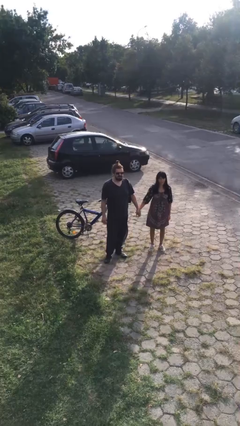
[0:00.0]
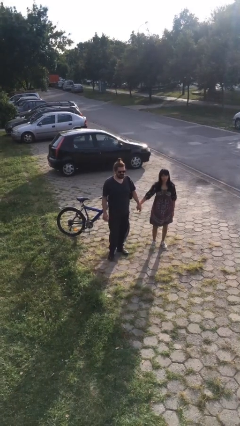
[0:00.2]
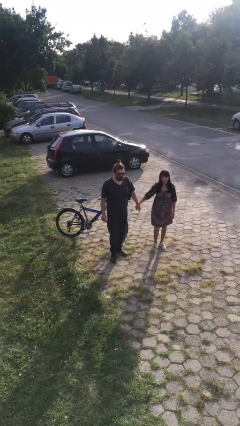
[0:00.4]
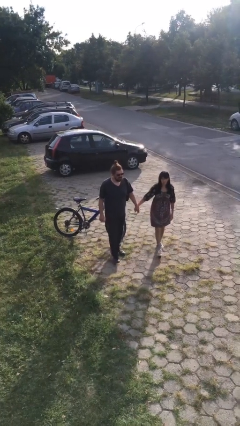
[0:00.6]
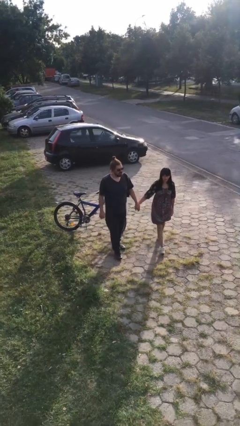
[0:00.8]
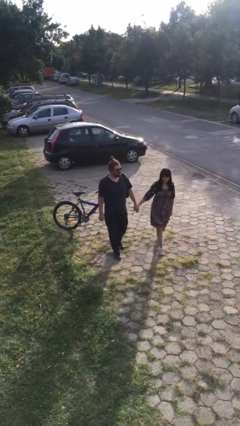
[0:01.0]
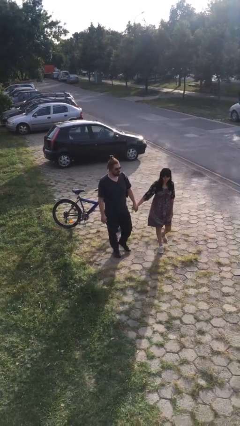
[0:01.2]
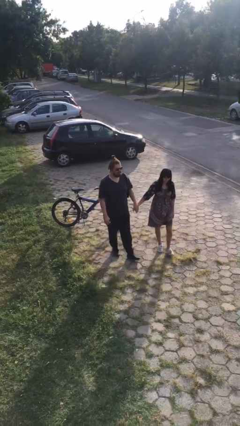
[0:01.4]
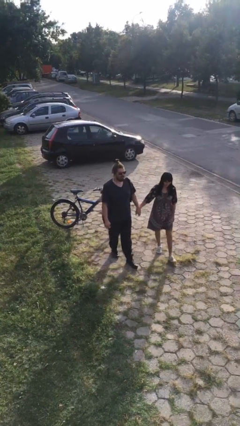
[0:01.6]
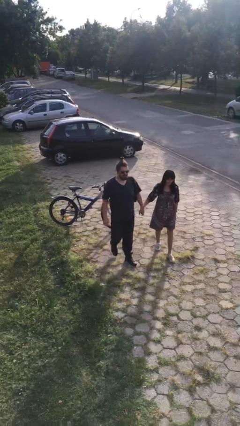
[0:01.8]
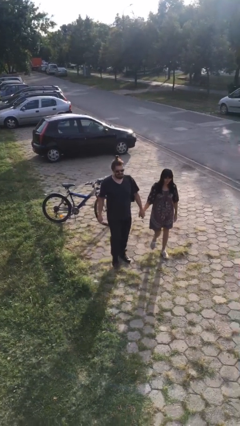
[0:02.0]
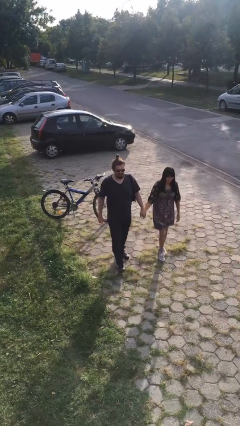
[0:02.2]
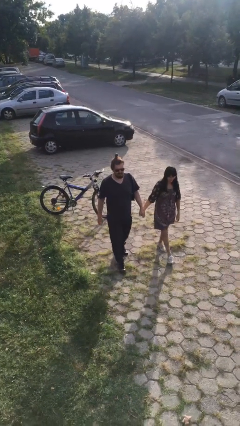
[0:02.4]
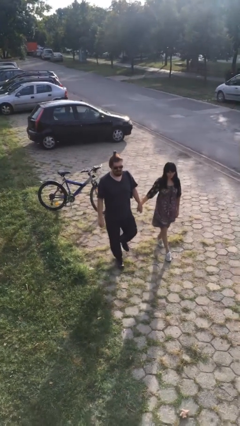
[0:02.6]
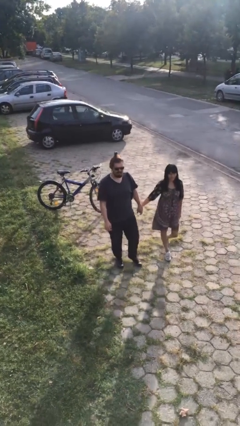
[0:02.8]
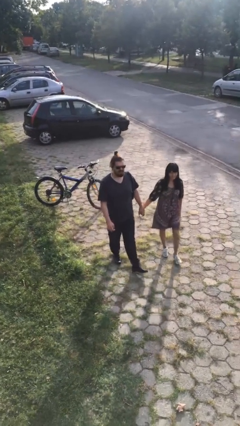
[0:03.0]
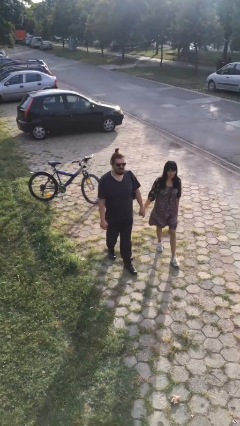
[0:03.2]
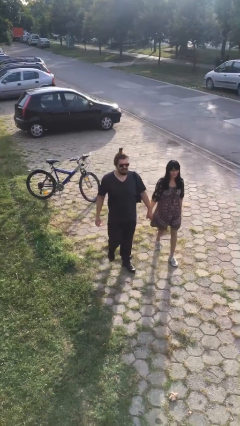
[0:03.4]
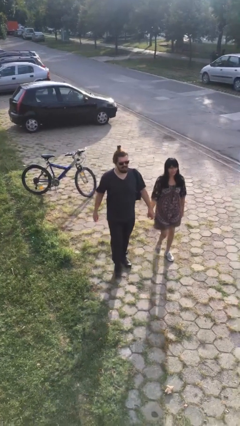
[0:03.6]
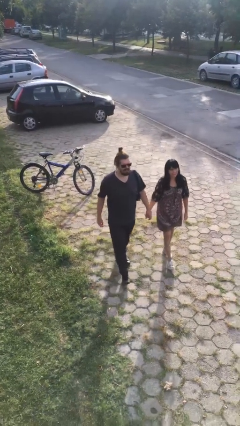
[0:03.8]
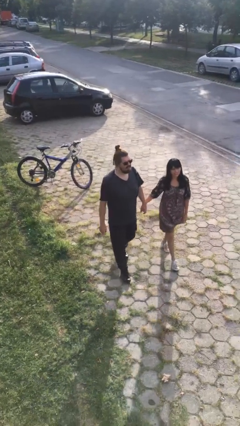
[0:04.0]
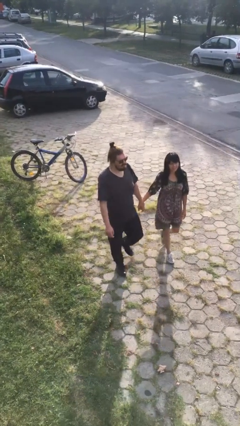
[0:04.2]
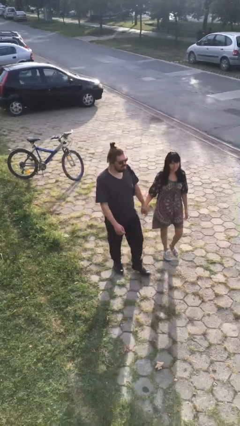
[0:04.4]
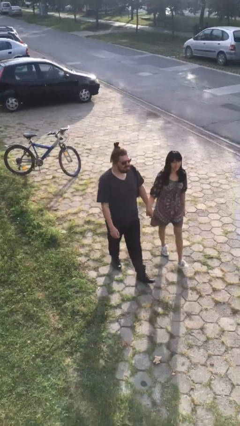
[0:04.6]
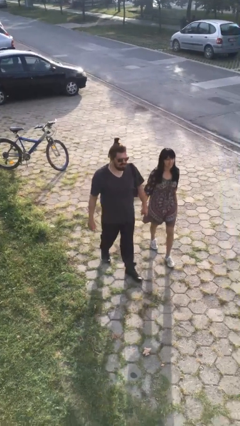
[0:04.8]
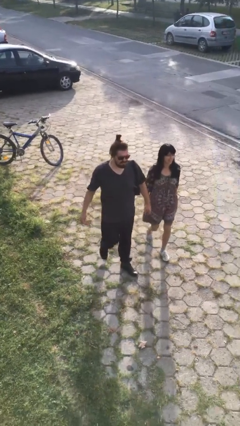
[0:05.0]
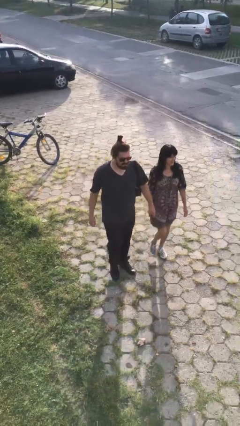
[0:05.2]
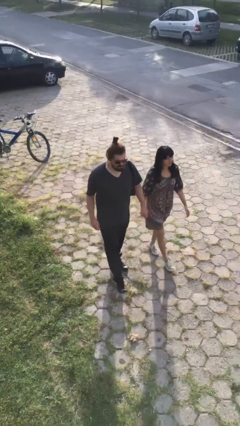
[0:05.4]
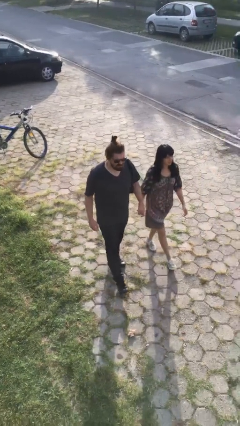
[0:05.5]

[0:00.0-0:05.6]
person holds hand

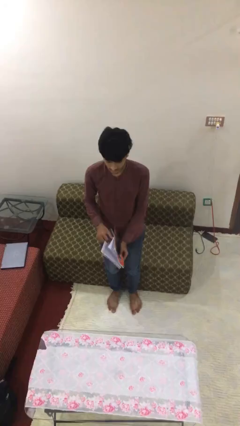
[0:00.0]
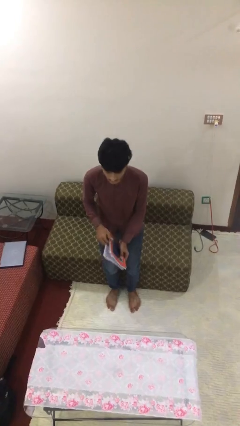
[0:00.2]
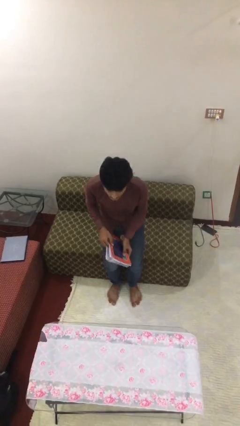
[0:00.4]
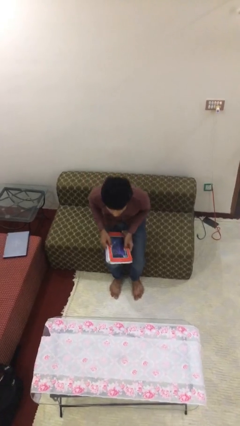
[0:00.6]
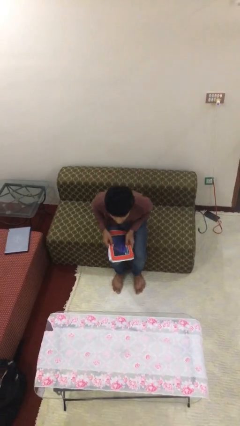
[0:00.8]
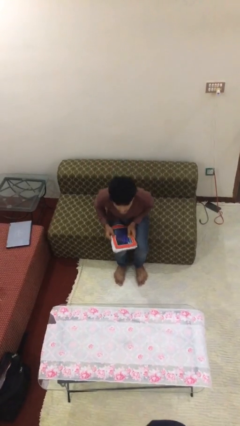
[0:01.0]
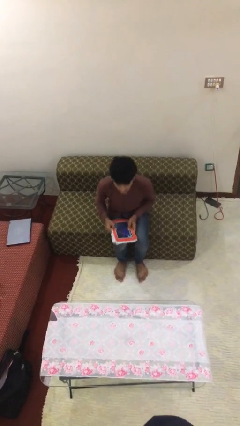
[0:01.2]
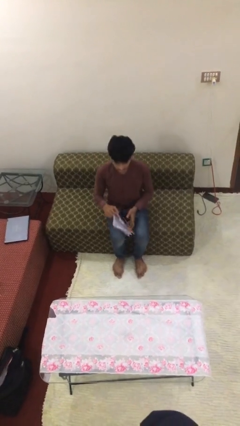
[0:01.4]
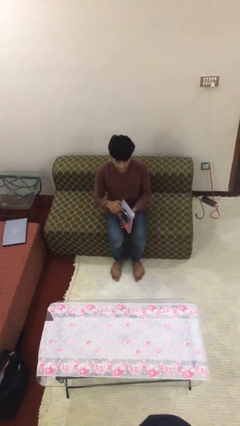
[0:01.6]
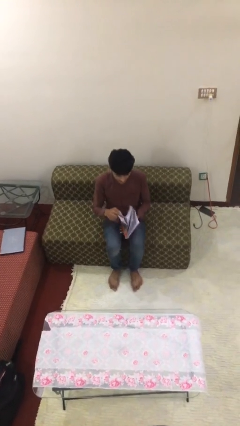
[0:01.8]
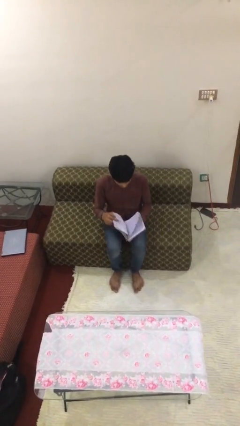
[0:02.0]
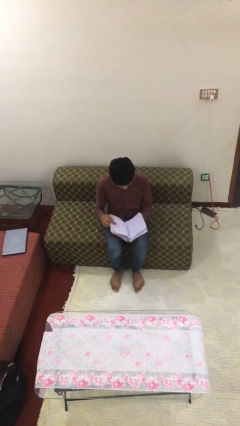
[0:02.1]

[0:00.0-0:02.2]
person sits down

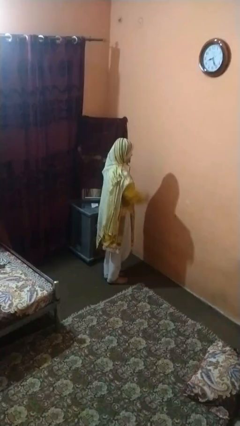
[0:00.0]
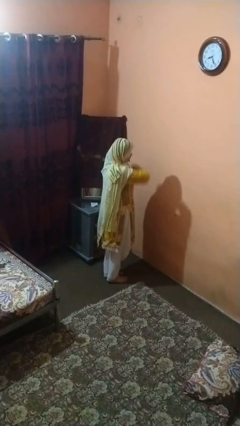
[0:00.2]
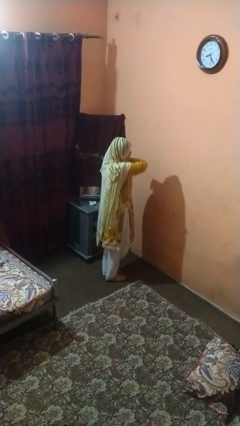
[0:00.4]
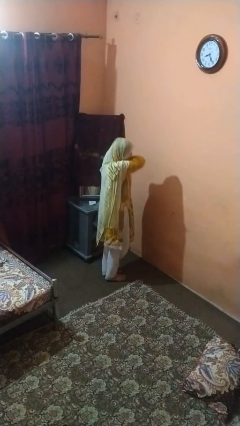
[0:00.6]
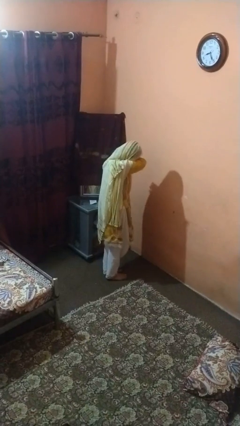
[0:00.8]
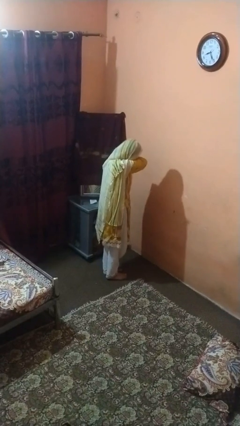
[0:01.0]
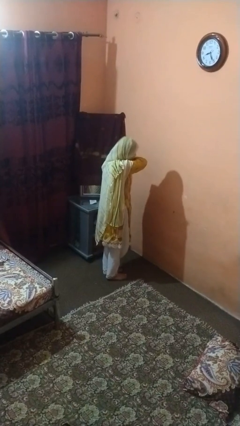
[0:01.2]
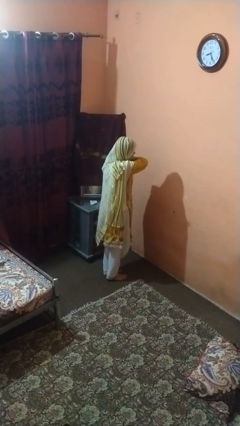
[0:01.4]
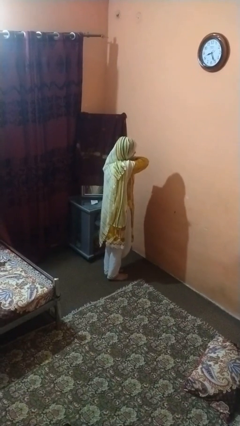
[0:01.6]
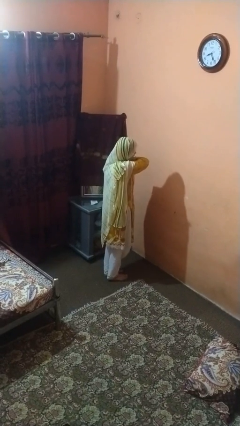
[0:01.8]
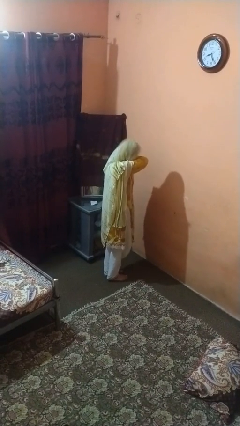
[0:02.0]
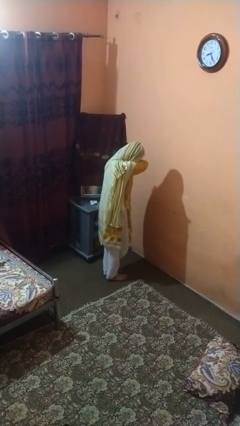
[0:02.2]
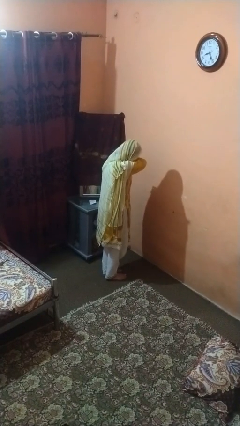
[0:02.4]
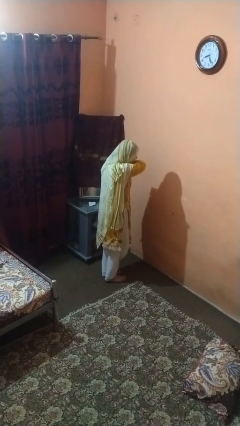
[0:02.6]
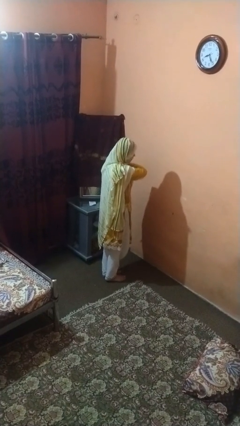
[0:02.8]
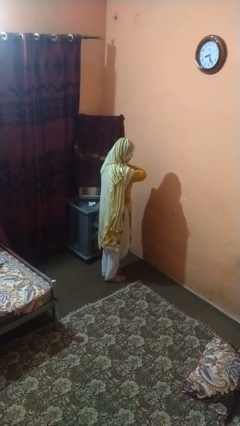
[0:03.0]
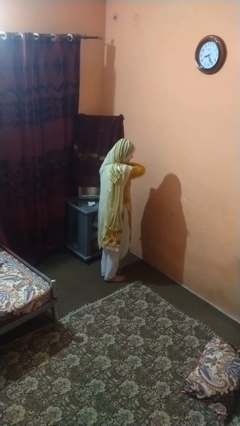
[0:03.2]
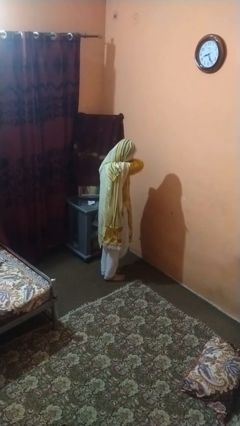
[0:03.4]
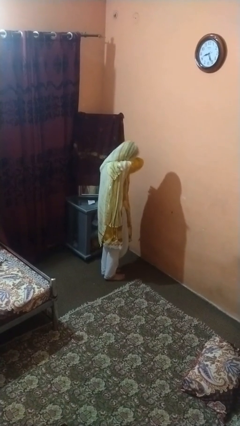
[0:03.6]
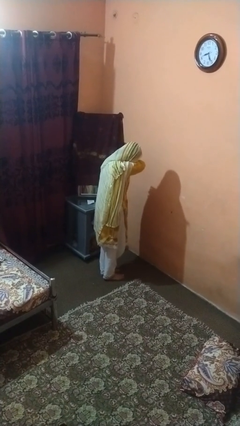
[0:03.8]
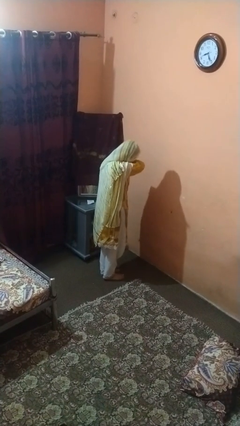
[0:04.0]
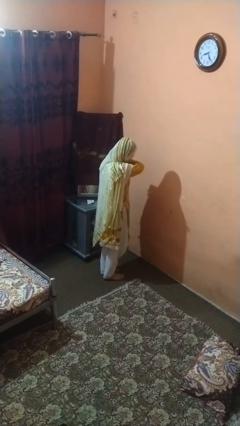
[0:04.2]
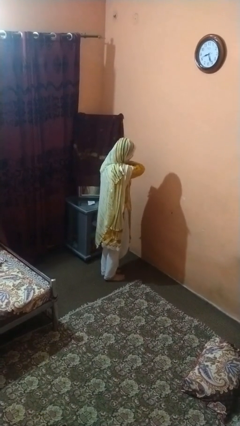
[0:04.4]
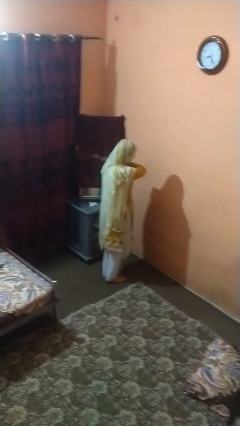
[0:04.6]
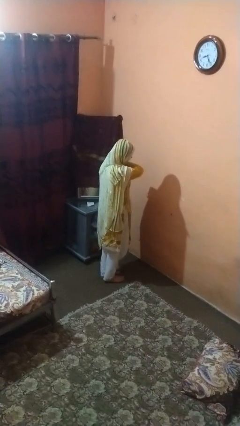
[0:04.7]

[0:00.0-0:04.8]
person sneezes into arm

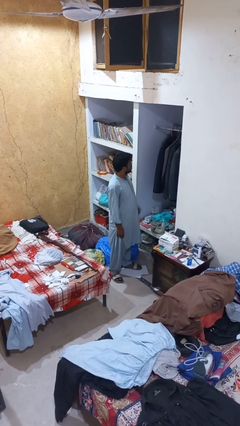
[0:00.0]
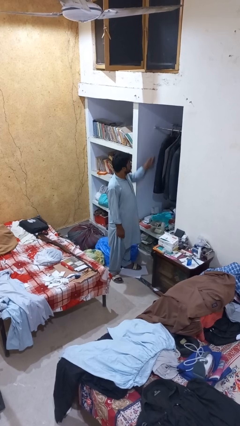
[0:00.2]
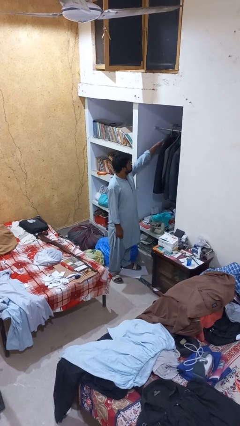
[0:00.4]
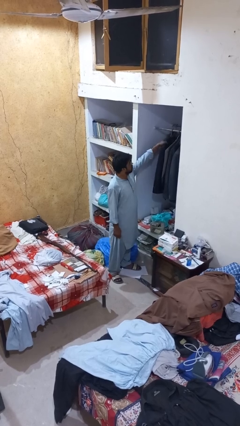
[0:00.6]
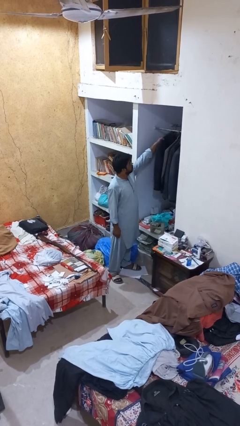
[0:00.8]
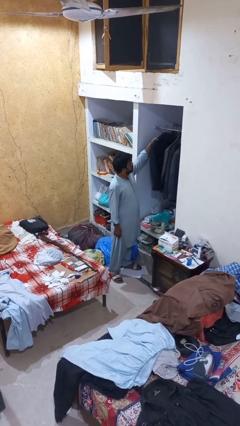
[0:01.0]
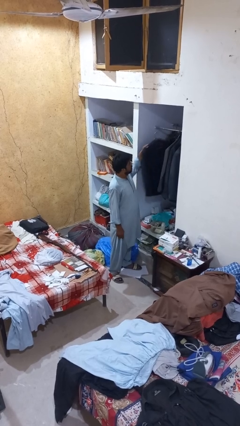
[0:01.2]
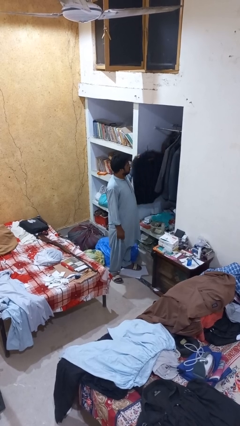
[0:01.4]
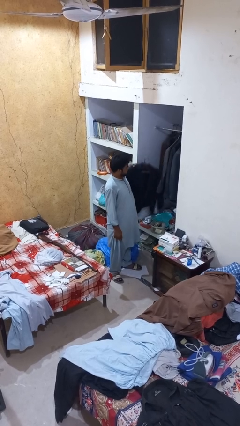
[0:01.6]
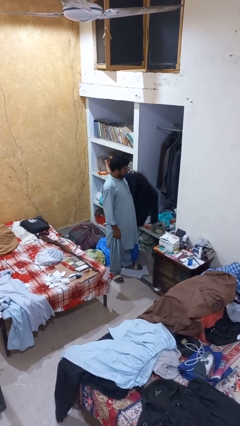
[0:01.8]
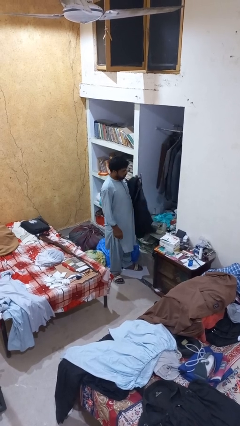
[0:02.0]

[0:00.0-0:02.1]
person takes clothes from closet

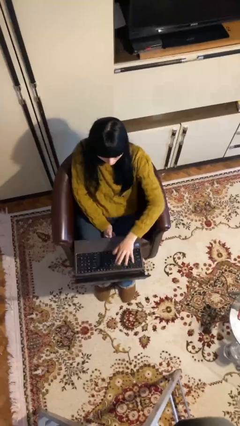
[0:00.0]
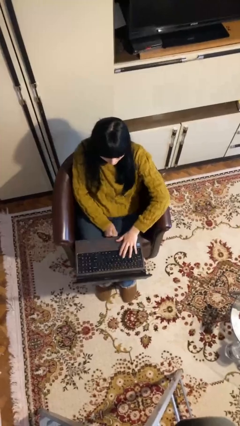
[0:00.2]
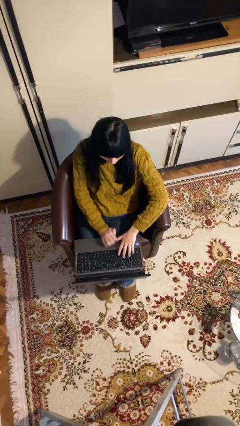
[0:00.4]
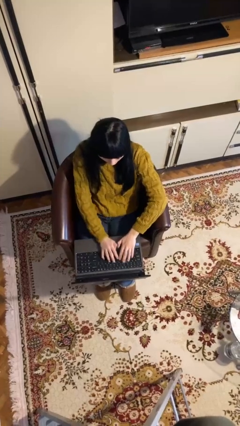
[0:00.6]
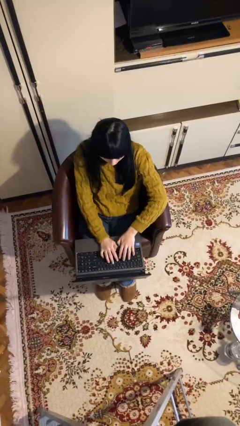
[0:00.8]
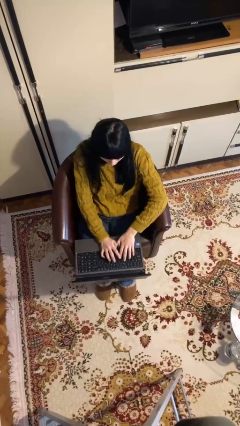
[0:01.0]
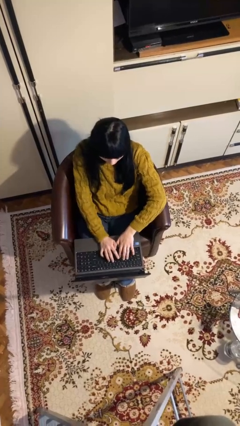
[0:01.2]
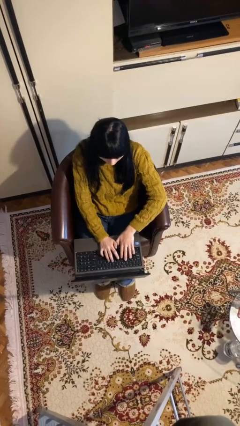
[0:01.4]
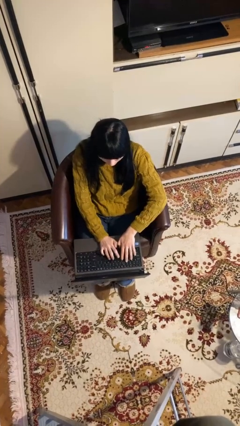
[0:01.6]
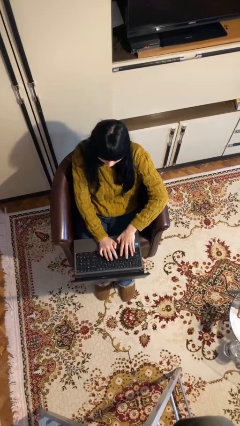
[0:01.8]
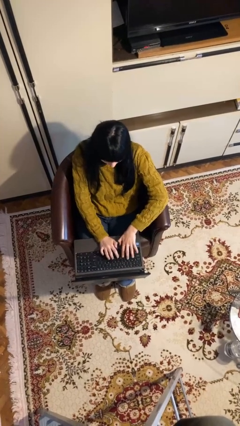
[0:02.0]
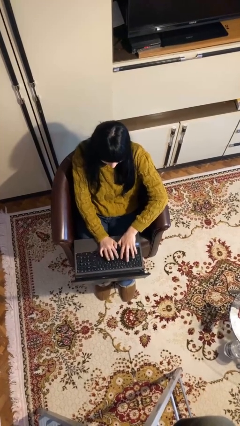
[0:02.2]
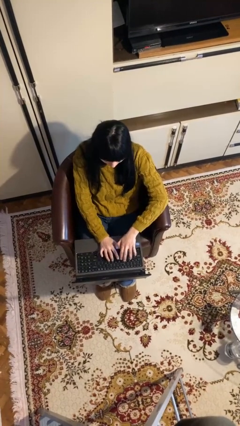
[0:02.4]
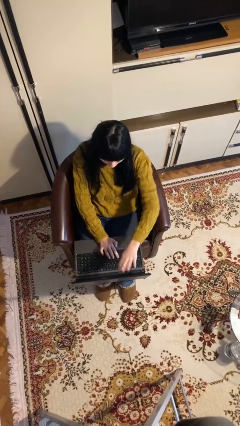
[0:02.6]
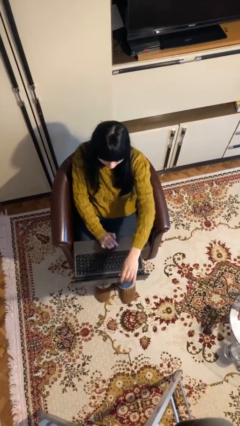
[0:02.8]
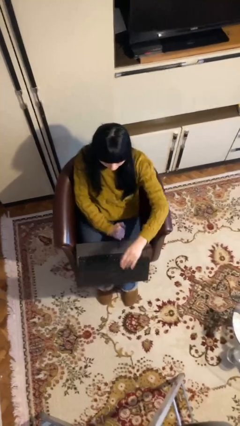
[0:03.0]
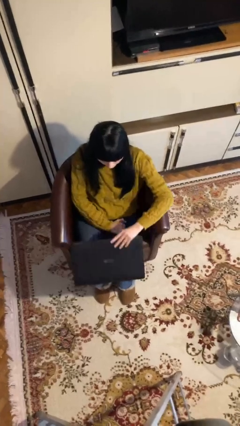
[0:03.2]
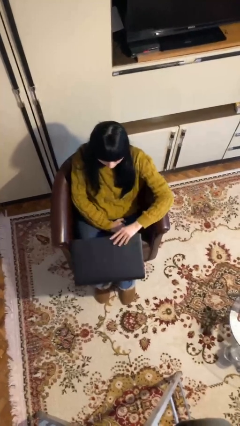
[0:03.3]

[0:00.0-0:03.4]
person interacts with laptop

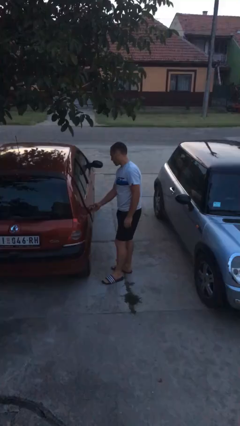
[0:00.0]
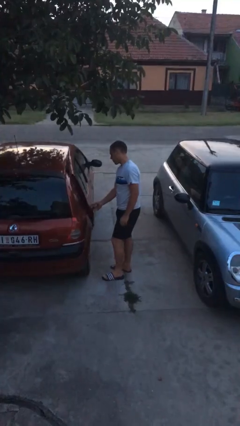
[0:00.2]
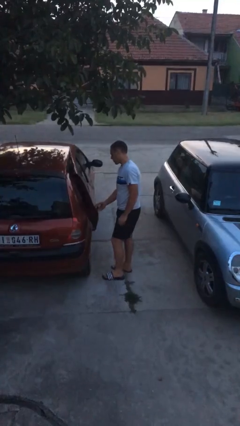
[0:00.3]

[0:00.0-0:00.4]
person opens car door
